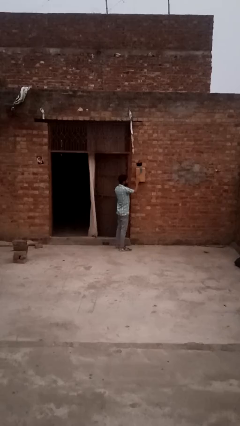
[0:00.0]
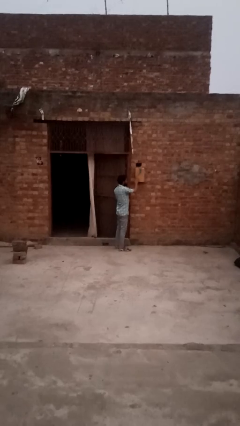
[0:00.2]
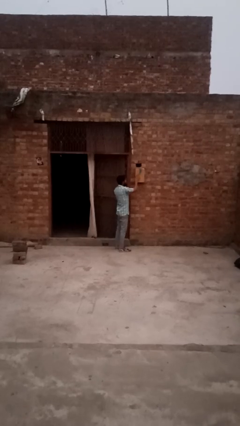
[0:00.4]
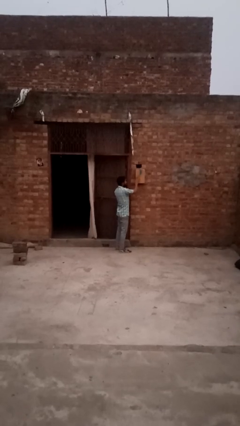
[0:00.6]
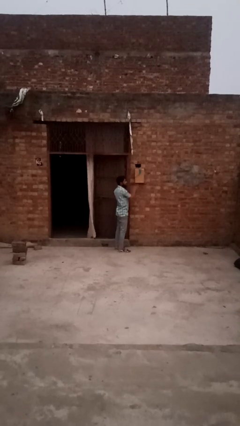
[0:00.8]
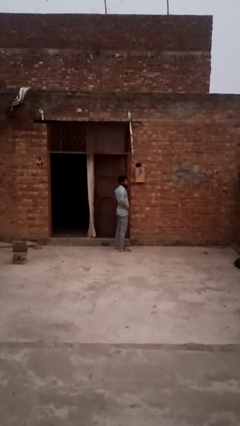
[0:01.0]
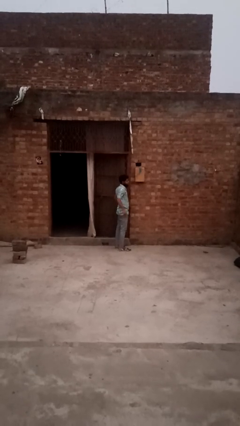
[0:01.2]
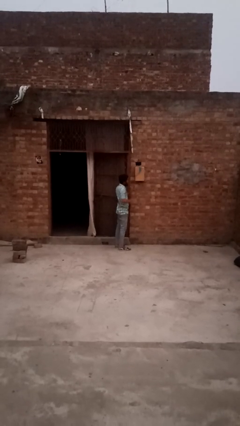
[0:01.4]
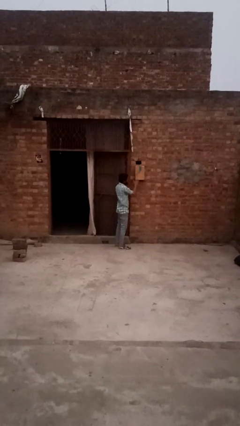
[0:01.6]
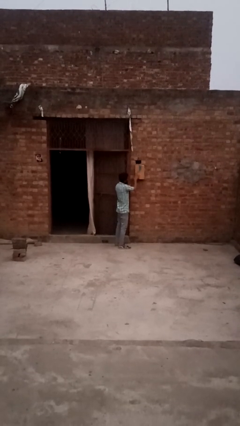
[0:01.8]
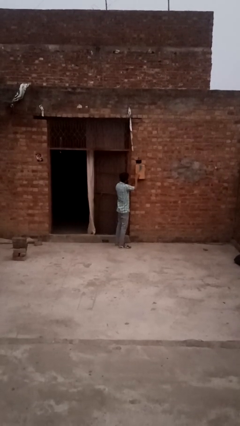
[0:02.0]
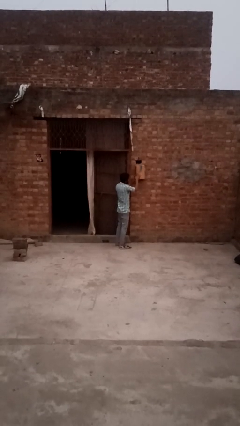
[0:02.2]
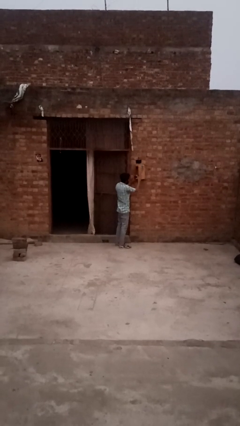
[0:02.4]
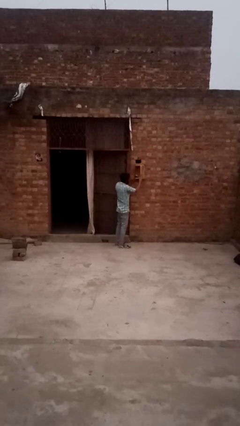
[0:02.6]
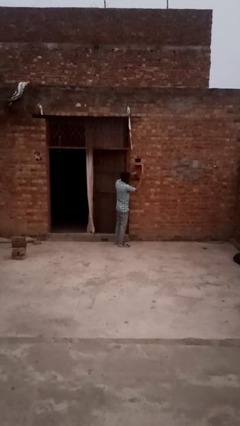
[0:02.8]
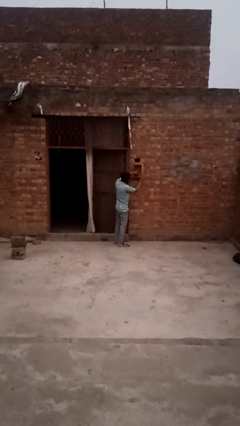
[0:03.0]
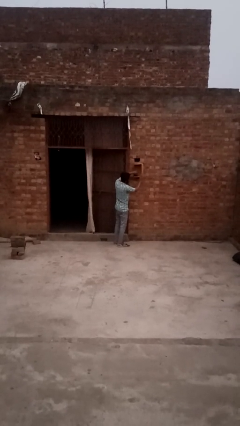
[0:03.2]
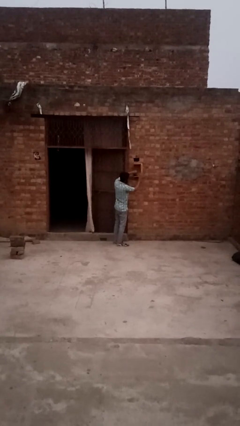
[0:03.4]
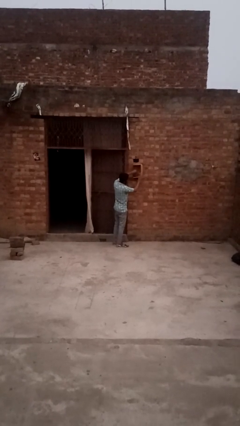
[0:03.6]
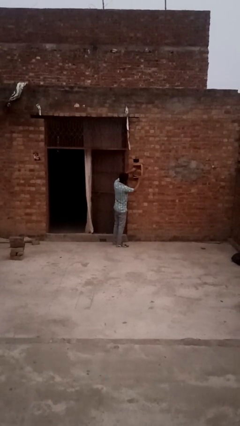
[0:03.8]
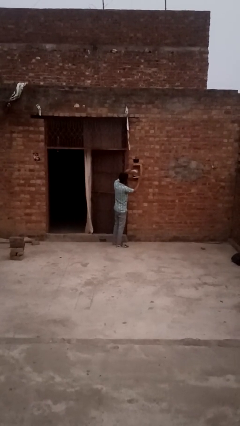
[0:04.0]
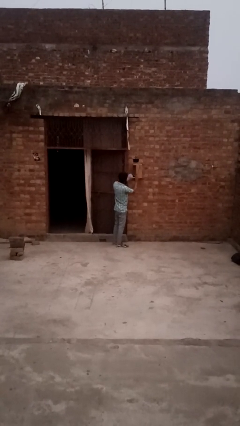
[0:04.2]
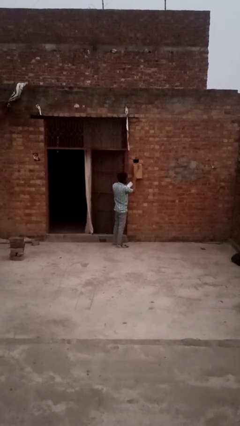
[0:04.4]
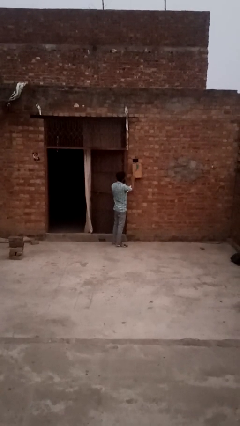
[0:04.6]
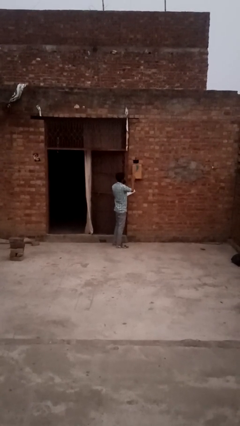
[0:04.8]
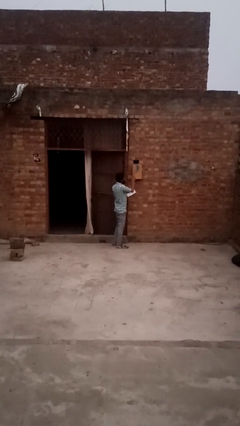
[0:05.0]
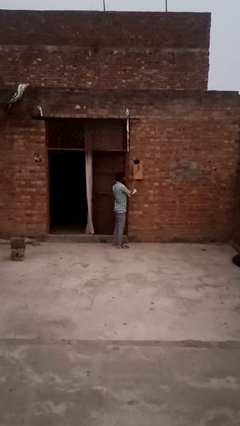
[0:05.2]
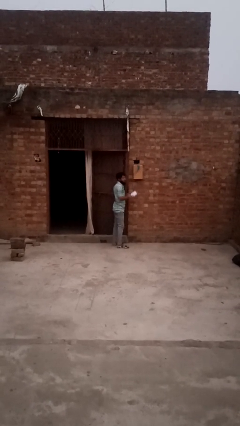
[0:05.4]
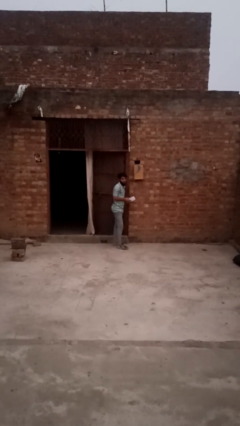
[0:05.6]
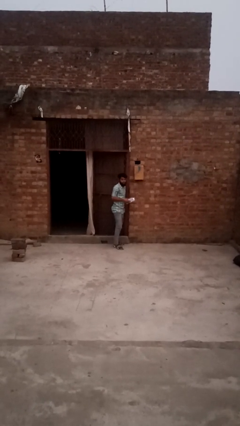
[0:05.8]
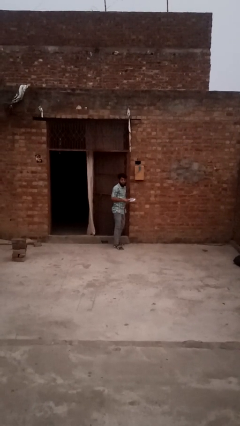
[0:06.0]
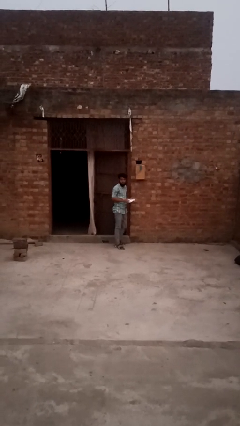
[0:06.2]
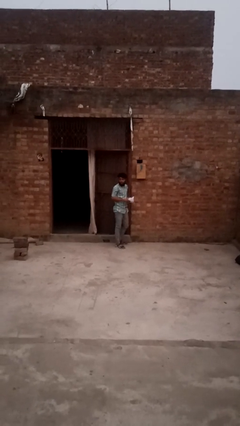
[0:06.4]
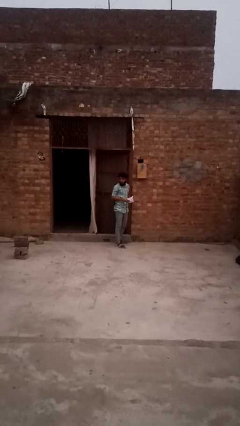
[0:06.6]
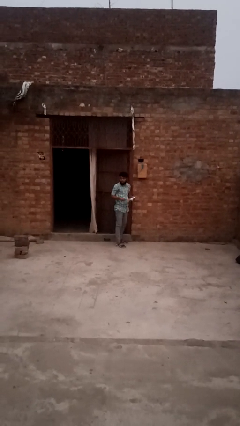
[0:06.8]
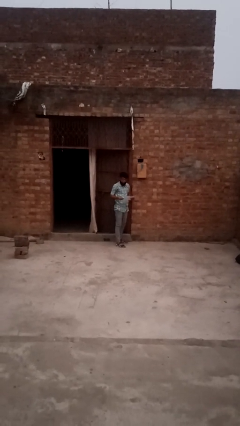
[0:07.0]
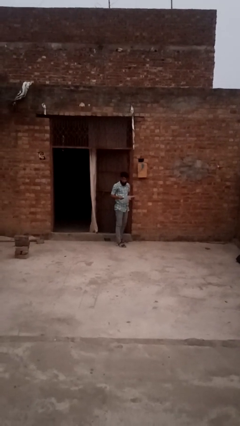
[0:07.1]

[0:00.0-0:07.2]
person puts letters in mailbox

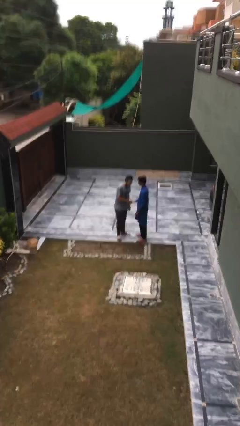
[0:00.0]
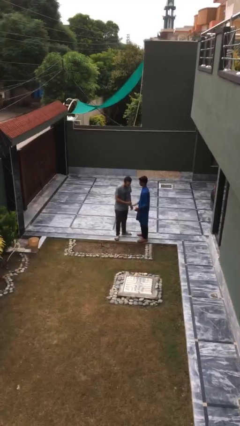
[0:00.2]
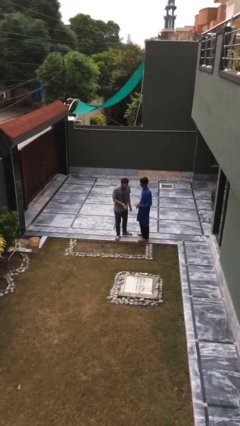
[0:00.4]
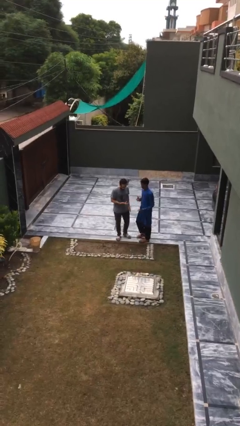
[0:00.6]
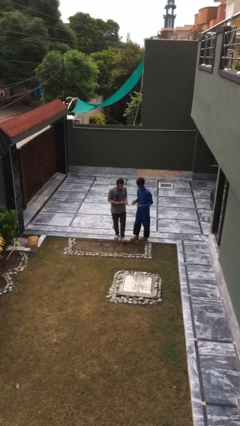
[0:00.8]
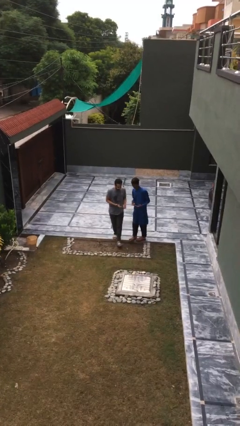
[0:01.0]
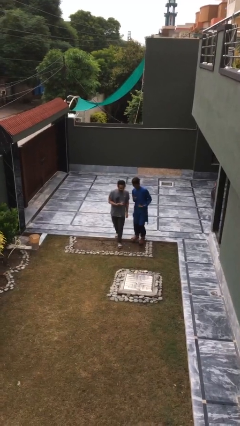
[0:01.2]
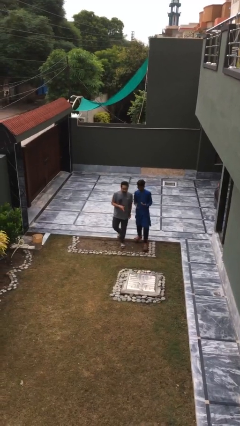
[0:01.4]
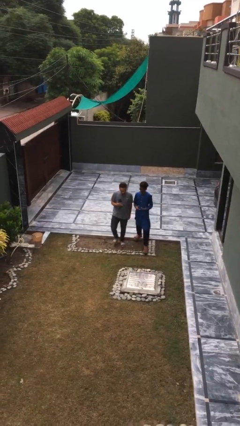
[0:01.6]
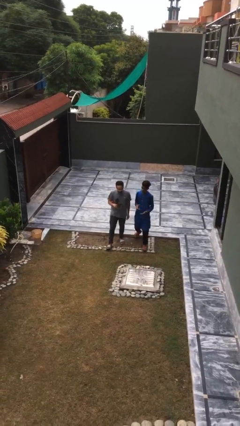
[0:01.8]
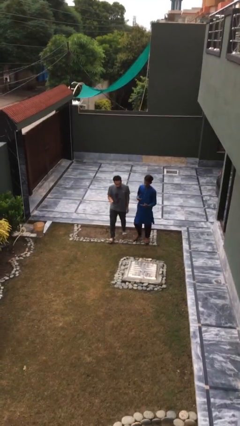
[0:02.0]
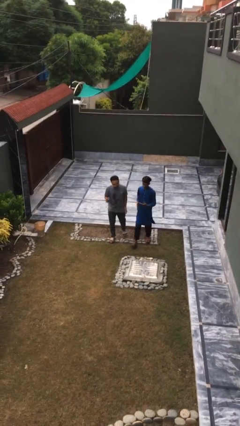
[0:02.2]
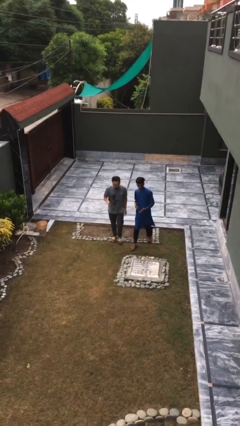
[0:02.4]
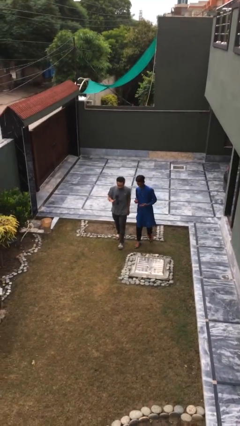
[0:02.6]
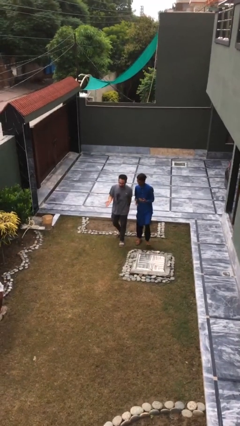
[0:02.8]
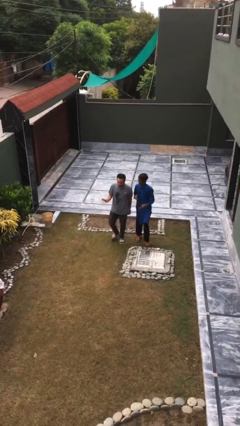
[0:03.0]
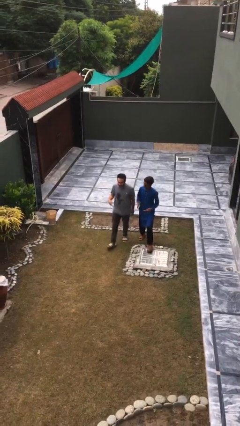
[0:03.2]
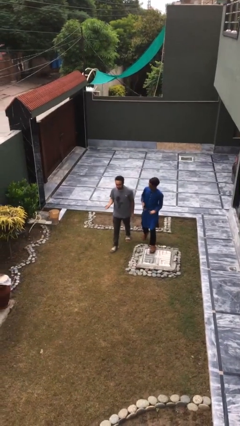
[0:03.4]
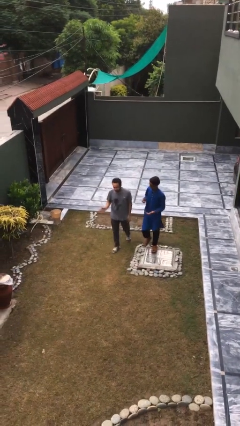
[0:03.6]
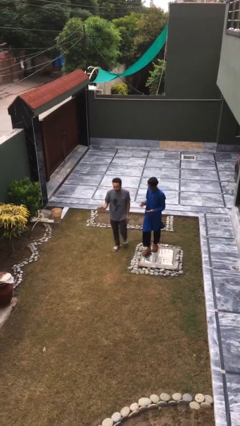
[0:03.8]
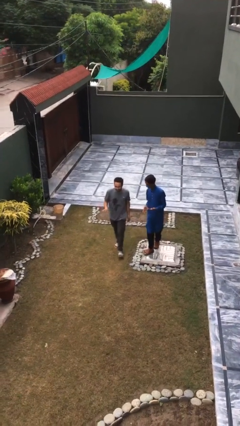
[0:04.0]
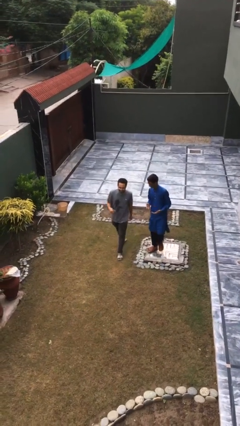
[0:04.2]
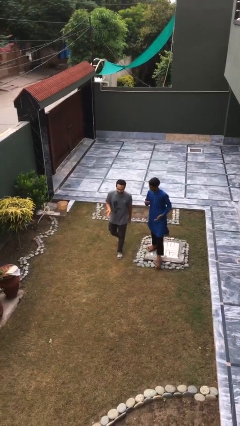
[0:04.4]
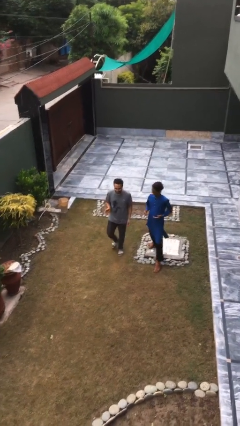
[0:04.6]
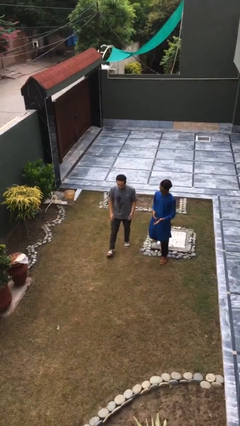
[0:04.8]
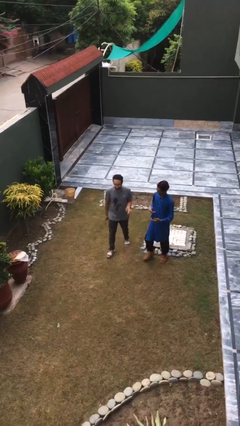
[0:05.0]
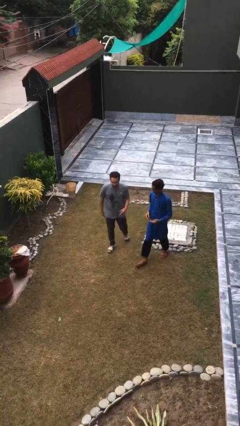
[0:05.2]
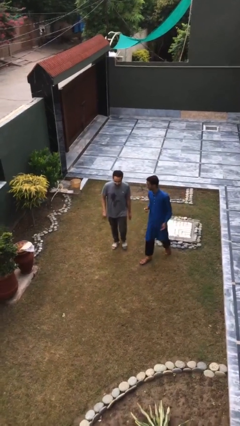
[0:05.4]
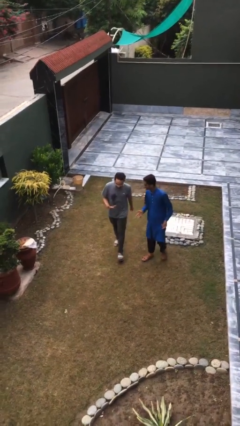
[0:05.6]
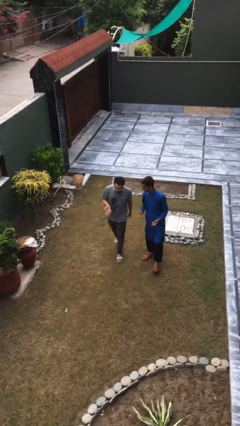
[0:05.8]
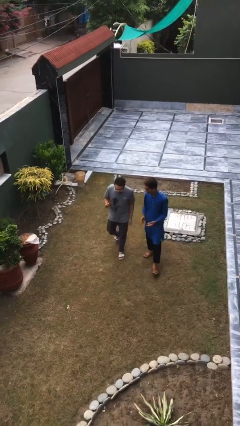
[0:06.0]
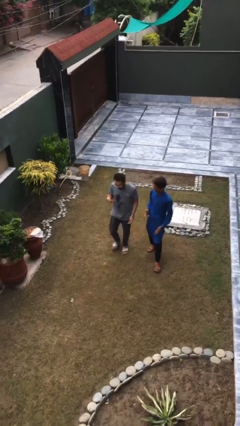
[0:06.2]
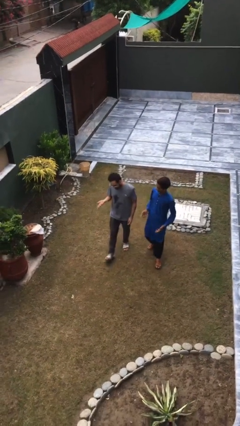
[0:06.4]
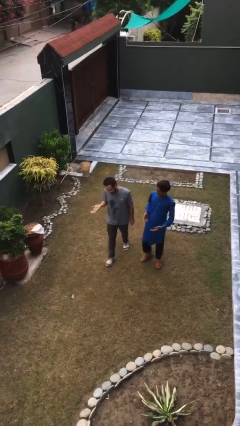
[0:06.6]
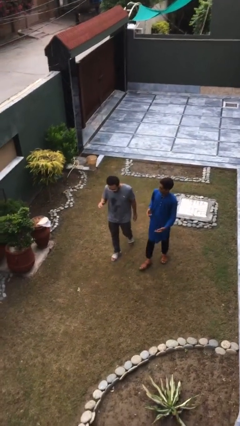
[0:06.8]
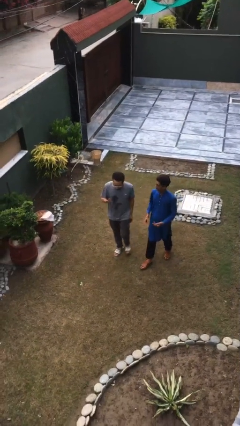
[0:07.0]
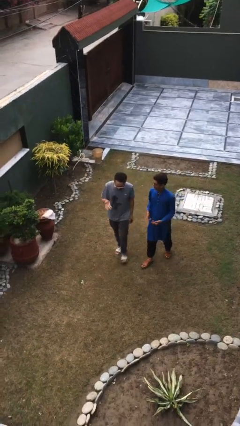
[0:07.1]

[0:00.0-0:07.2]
person talks to person

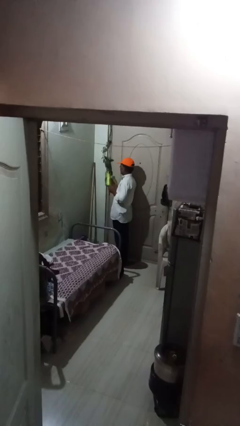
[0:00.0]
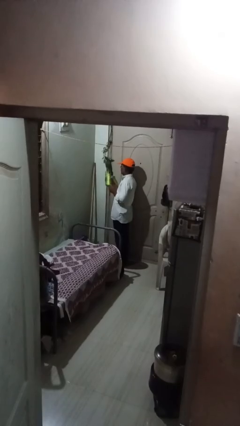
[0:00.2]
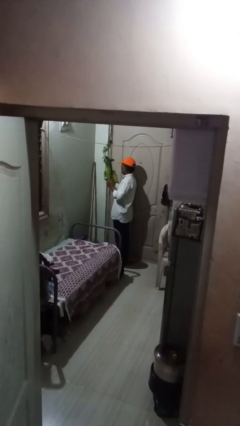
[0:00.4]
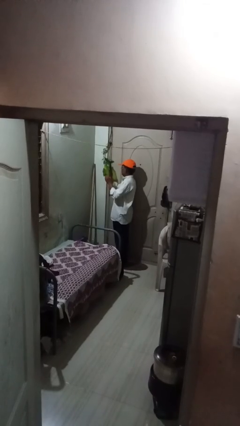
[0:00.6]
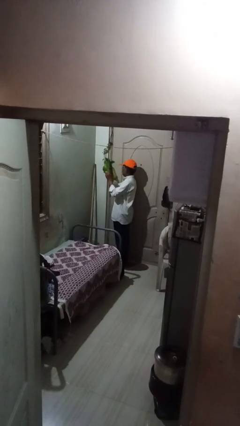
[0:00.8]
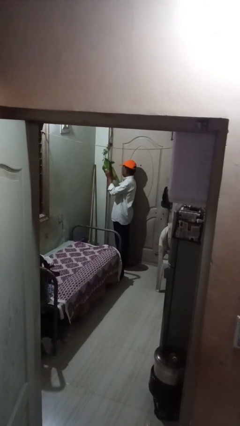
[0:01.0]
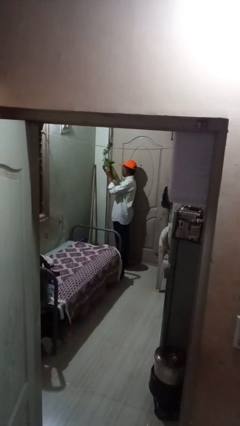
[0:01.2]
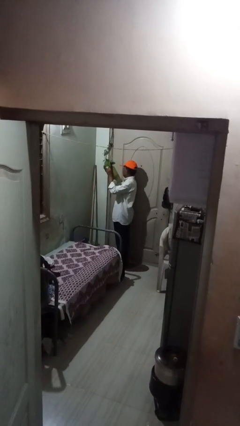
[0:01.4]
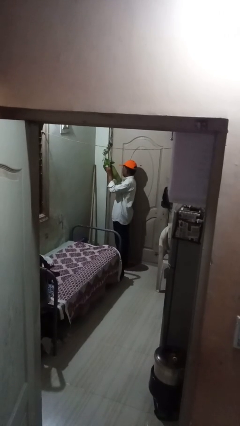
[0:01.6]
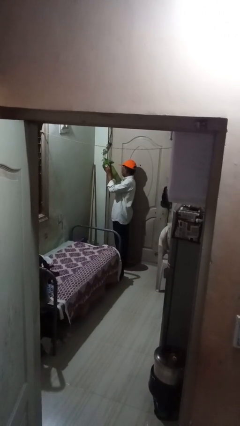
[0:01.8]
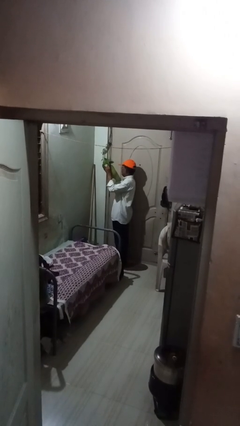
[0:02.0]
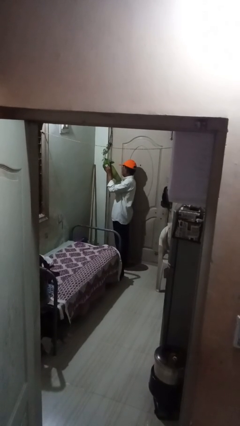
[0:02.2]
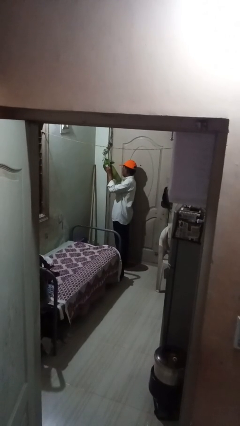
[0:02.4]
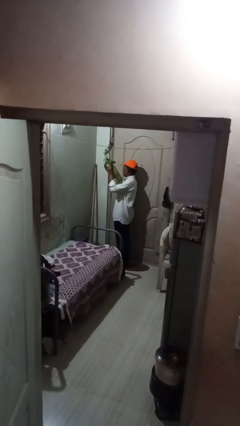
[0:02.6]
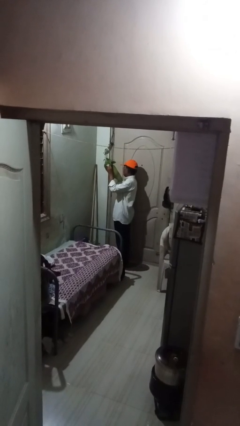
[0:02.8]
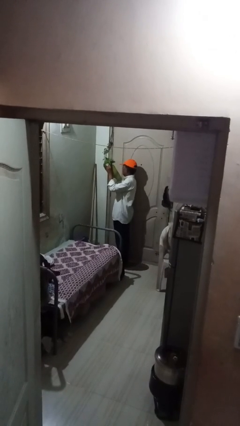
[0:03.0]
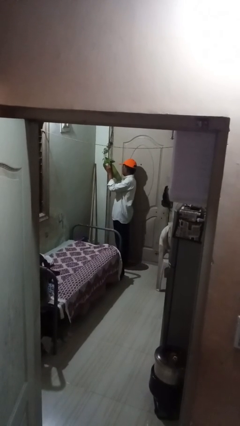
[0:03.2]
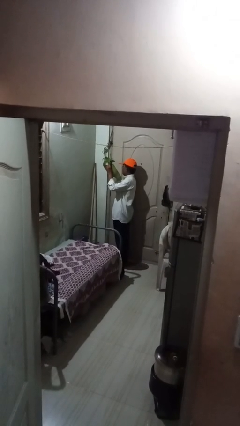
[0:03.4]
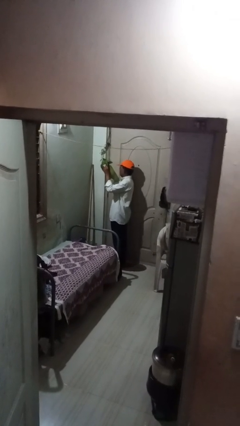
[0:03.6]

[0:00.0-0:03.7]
person waters houseplant
